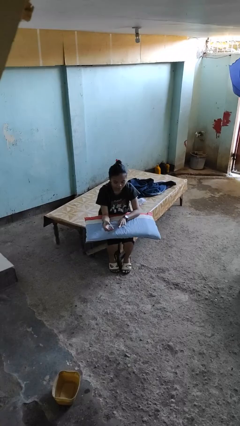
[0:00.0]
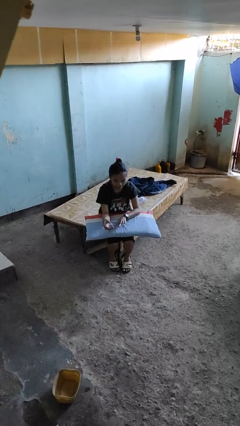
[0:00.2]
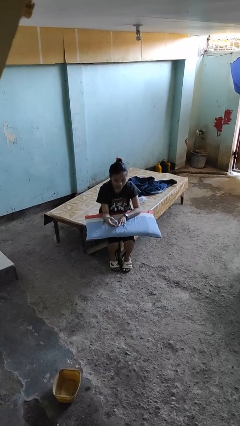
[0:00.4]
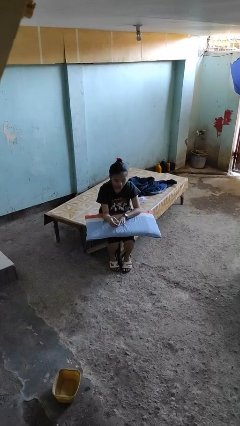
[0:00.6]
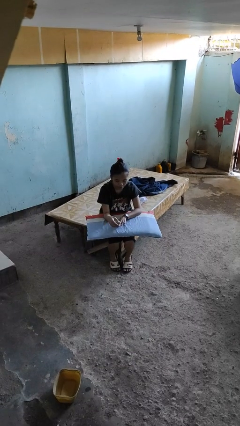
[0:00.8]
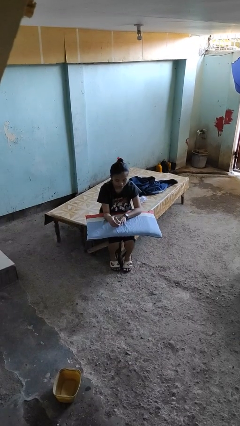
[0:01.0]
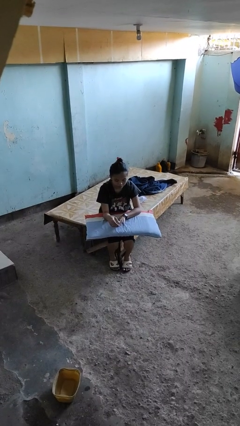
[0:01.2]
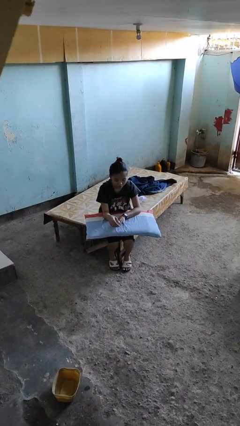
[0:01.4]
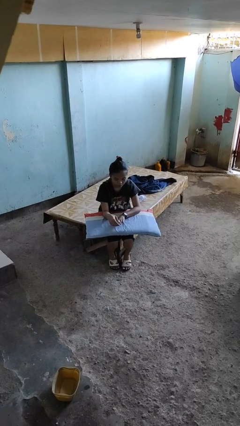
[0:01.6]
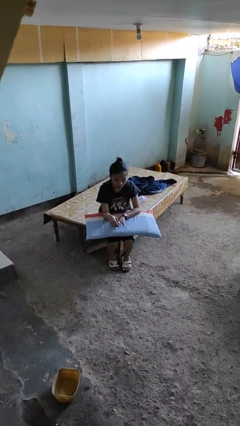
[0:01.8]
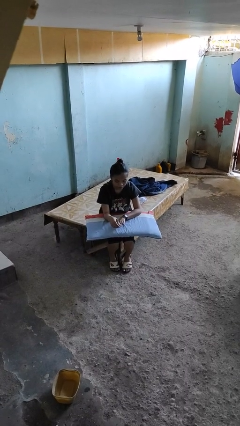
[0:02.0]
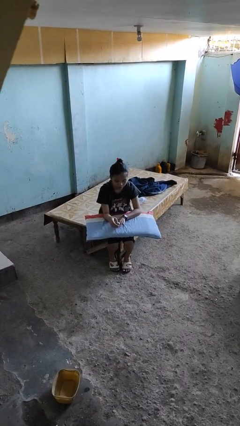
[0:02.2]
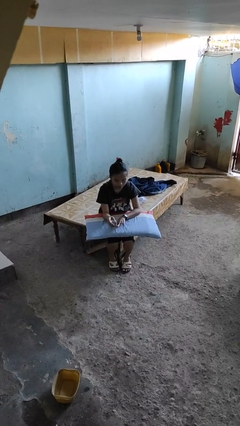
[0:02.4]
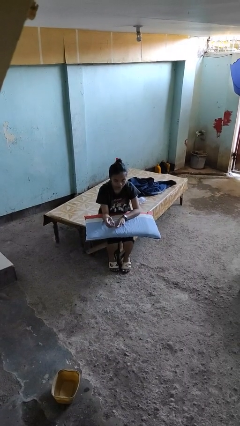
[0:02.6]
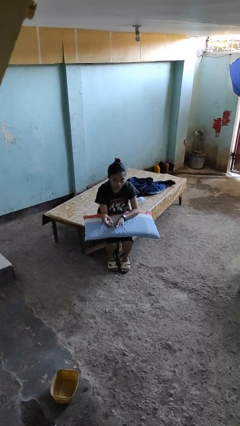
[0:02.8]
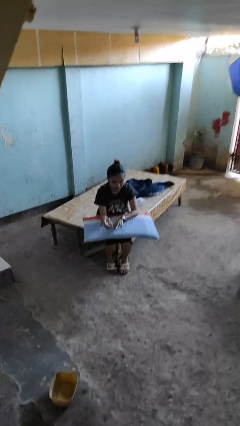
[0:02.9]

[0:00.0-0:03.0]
person clips fingernails

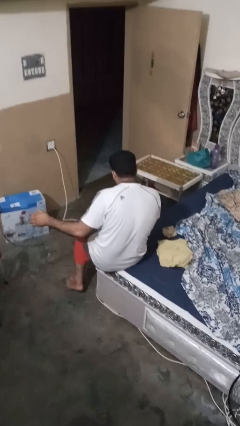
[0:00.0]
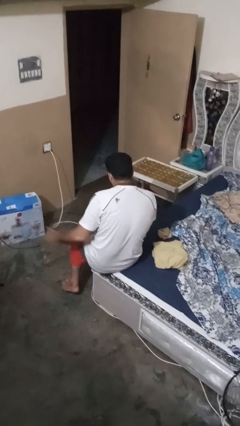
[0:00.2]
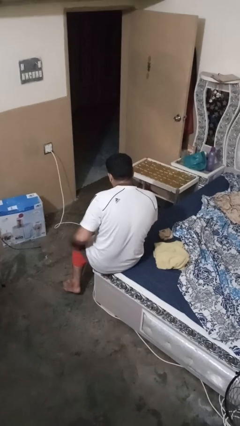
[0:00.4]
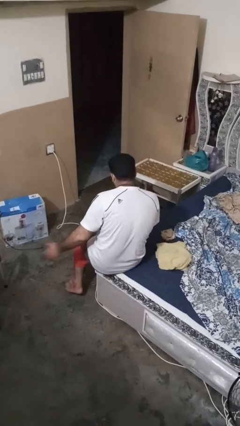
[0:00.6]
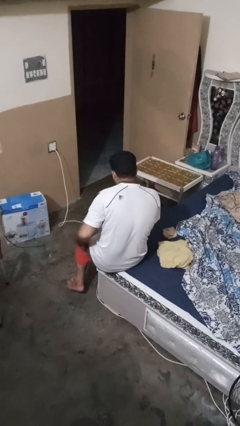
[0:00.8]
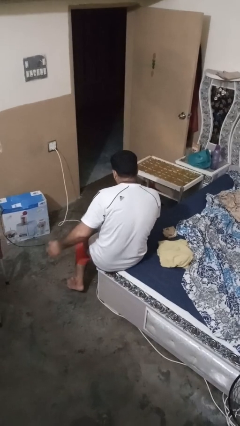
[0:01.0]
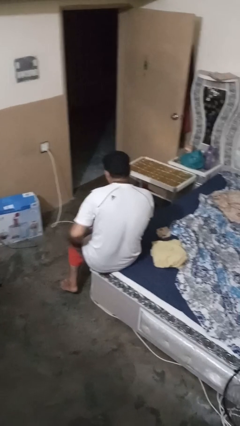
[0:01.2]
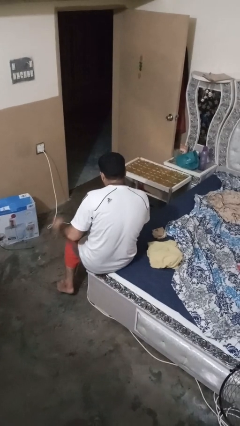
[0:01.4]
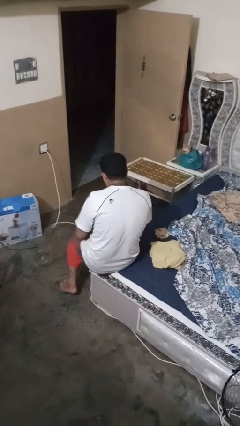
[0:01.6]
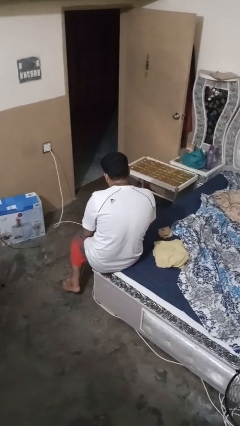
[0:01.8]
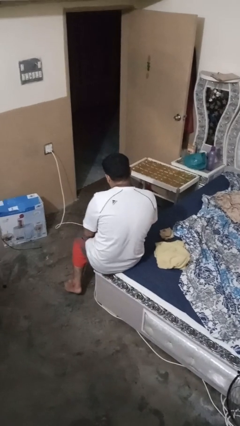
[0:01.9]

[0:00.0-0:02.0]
person slaps hands on thighs

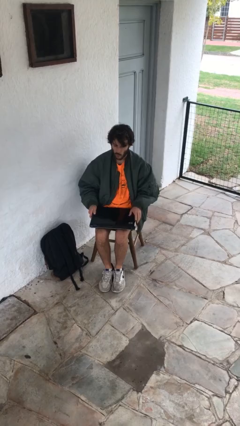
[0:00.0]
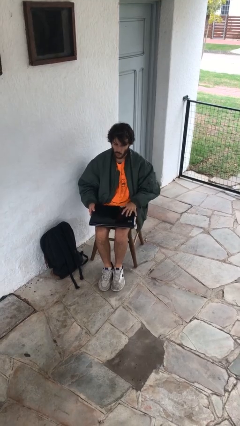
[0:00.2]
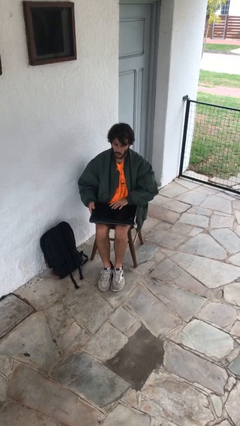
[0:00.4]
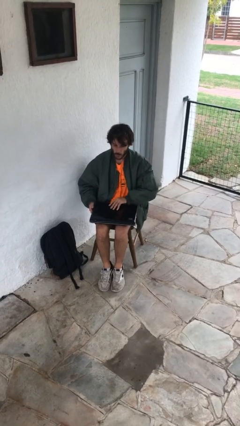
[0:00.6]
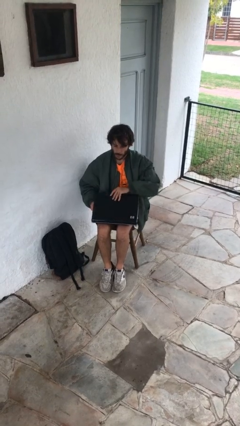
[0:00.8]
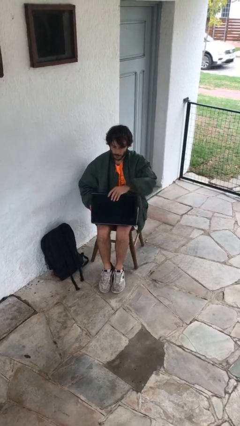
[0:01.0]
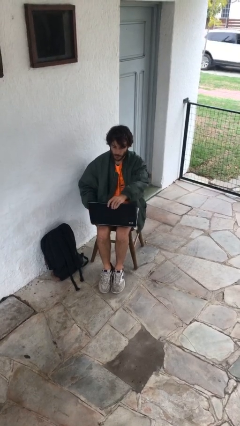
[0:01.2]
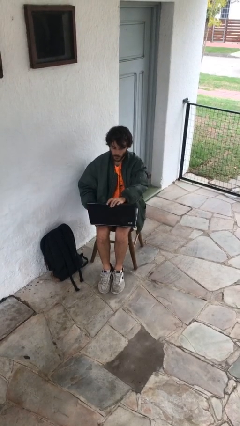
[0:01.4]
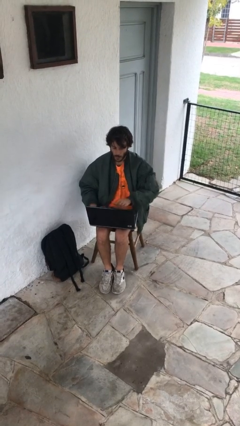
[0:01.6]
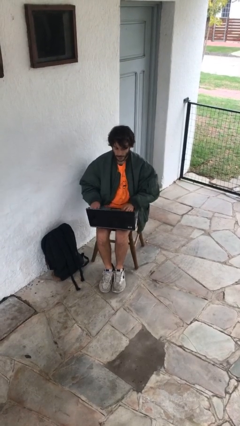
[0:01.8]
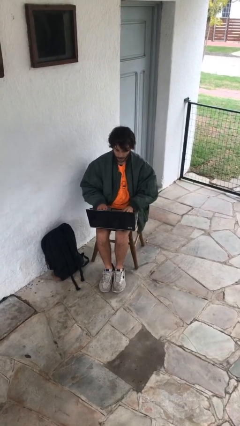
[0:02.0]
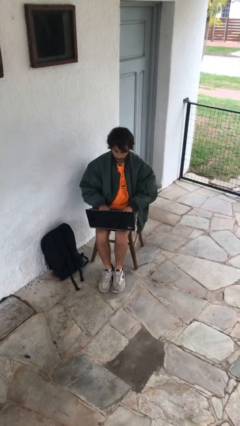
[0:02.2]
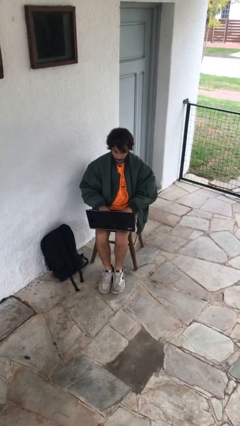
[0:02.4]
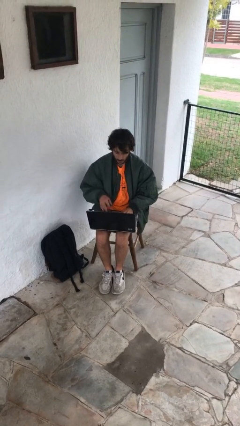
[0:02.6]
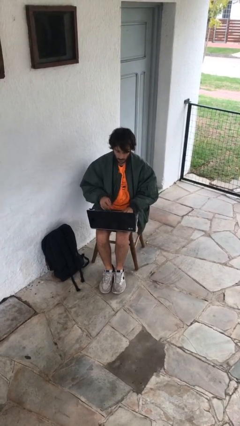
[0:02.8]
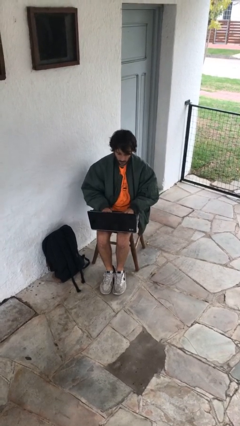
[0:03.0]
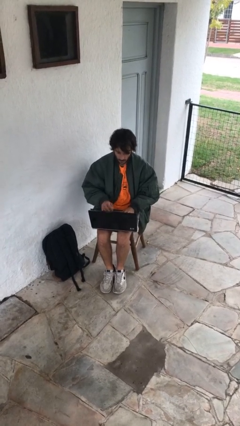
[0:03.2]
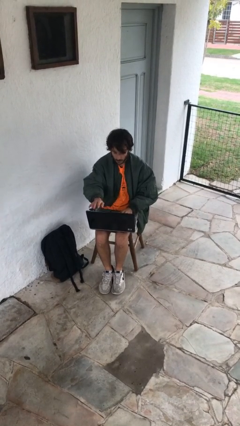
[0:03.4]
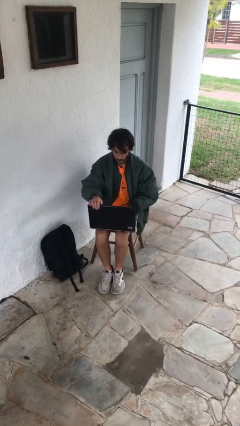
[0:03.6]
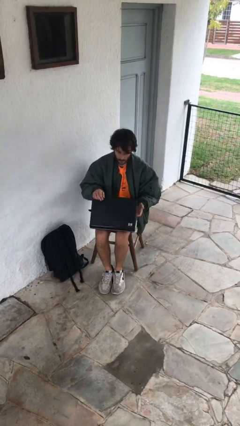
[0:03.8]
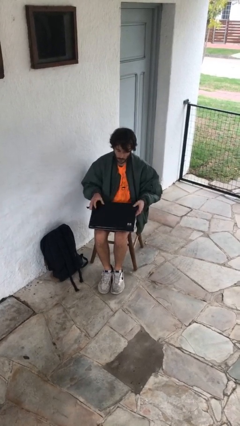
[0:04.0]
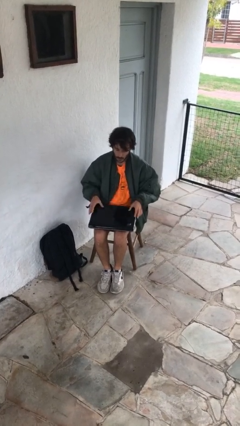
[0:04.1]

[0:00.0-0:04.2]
person interacts with laptop

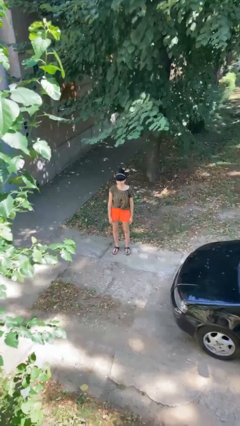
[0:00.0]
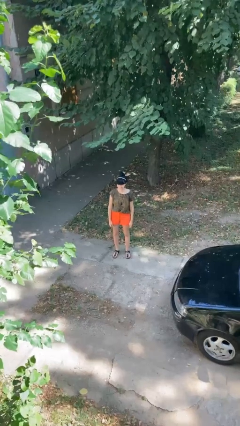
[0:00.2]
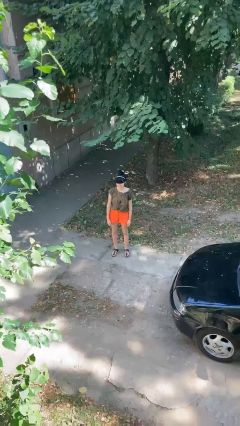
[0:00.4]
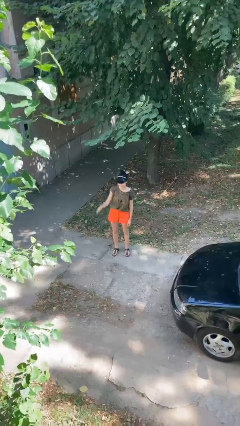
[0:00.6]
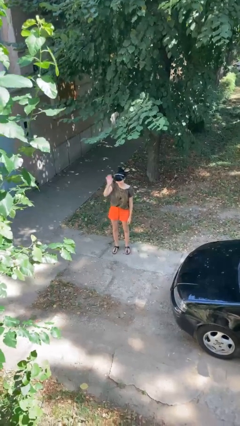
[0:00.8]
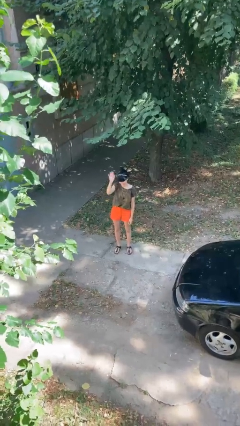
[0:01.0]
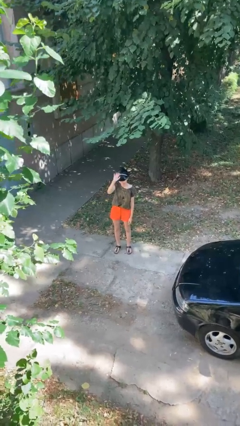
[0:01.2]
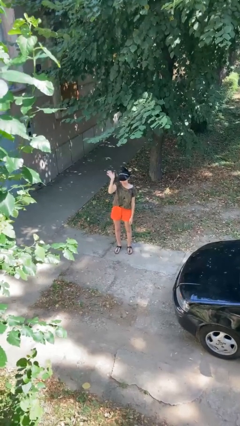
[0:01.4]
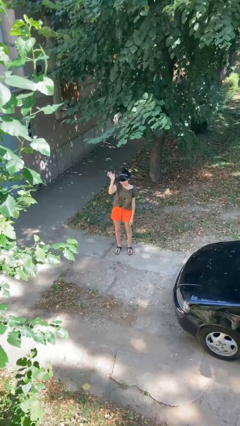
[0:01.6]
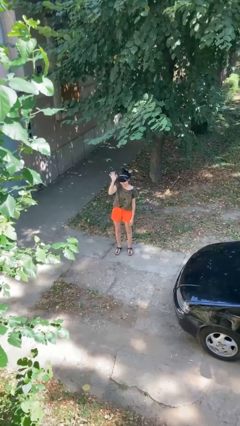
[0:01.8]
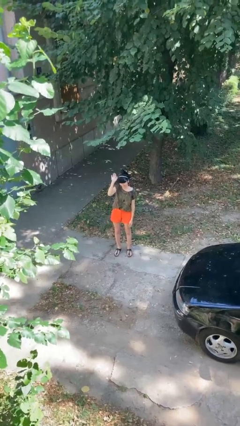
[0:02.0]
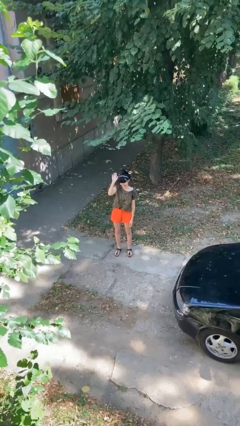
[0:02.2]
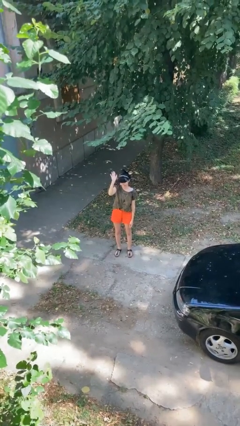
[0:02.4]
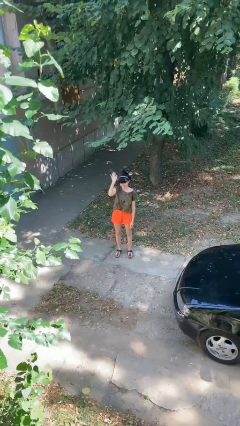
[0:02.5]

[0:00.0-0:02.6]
person waves at person

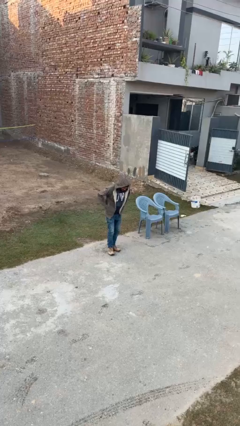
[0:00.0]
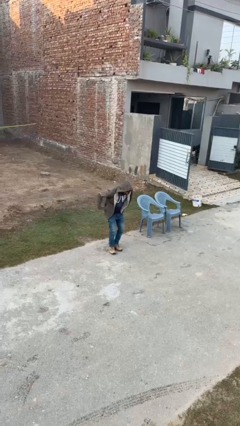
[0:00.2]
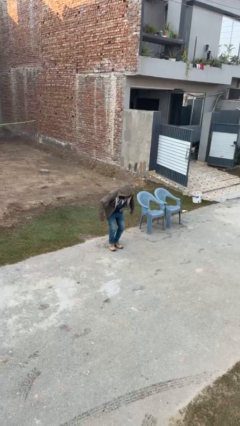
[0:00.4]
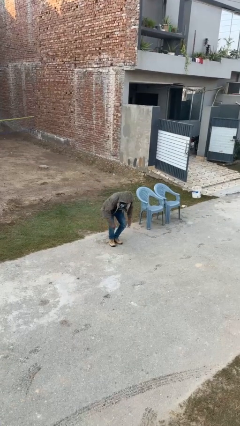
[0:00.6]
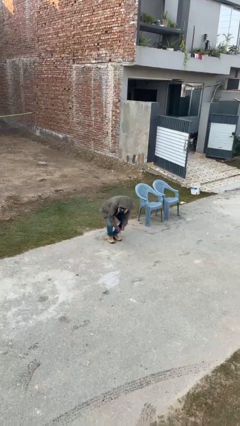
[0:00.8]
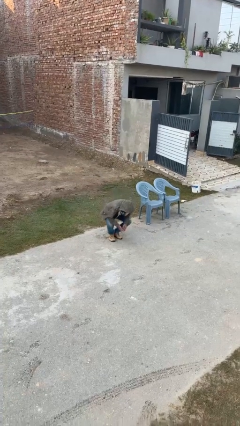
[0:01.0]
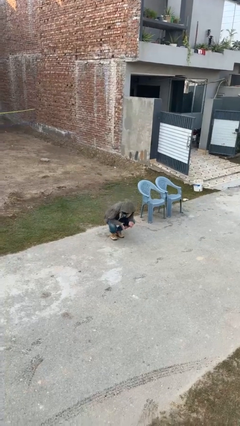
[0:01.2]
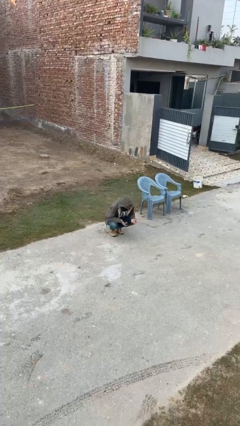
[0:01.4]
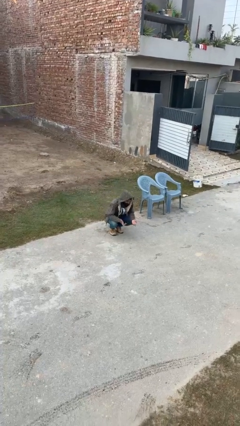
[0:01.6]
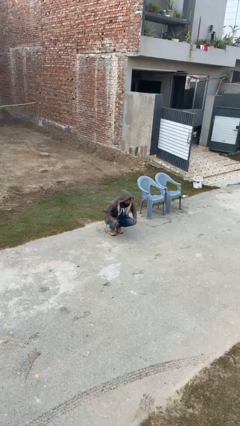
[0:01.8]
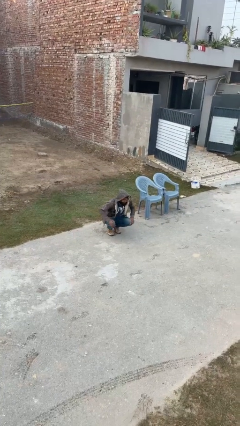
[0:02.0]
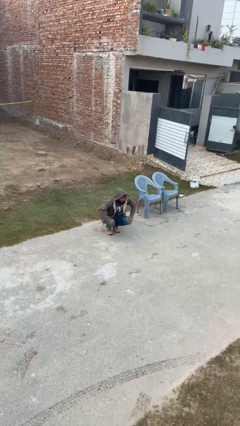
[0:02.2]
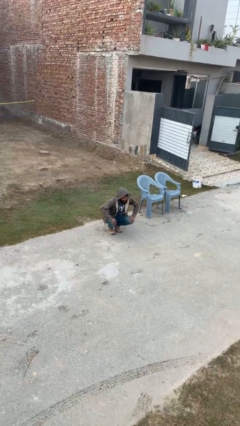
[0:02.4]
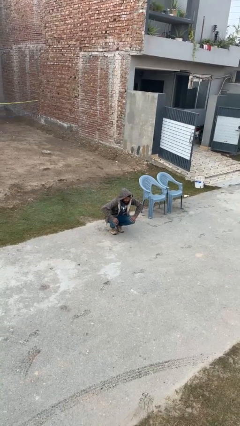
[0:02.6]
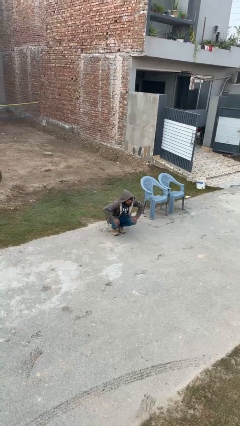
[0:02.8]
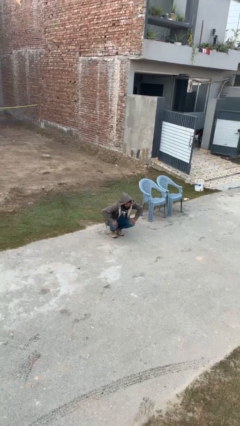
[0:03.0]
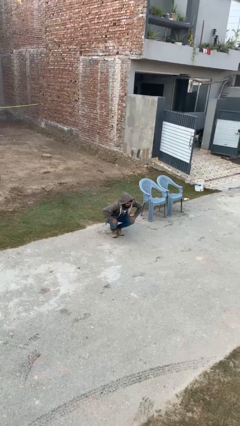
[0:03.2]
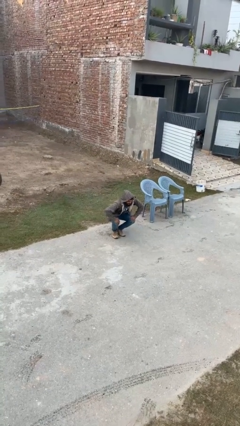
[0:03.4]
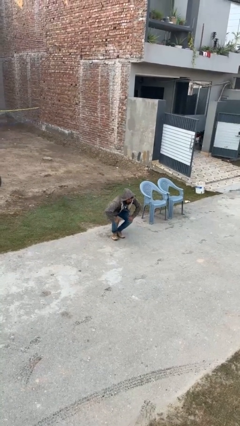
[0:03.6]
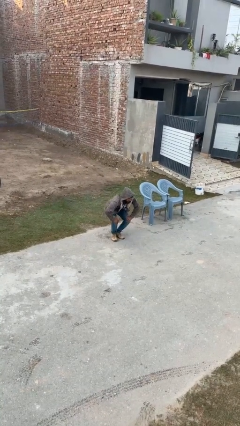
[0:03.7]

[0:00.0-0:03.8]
person sits down

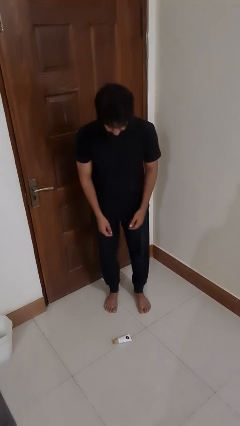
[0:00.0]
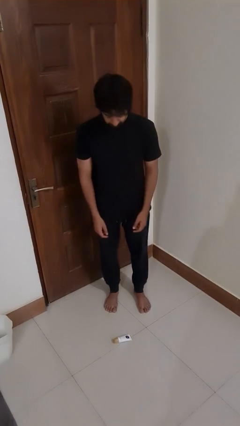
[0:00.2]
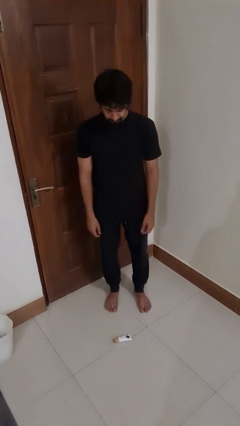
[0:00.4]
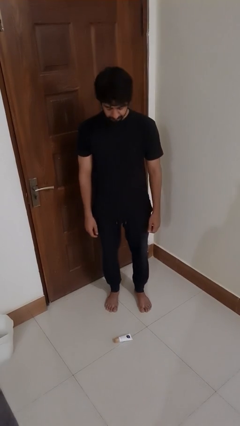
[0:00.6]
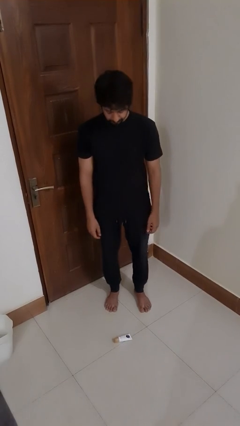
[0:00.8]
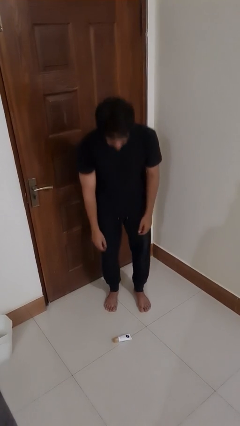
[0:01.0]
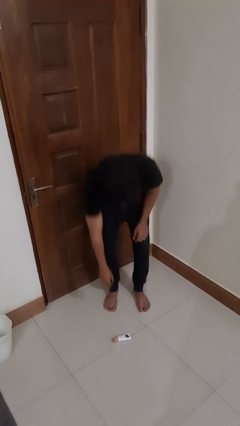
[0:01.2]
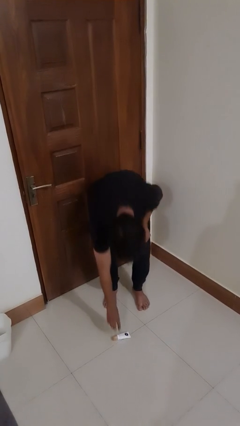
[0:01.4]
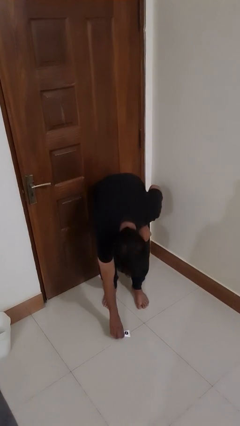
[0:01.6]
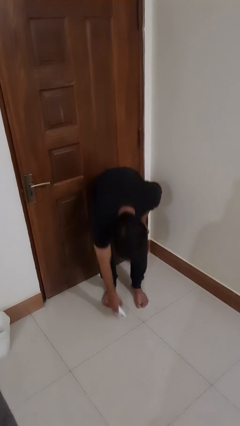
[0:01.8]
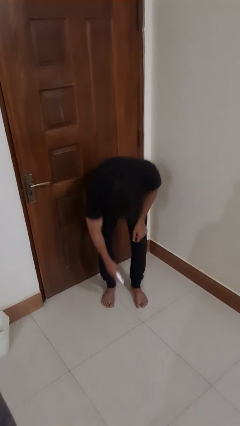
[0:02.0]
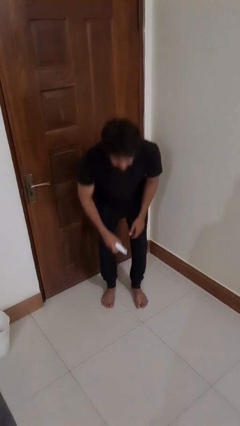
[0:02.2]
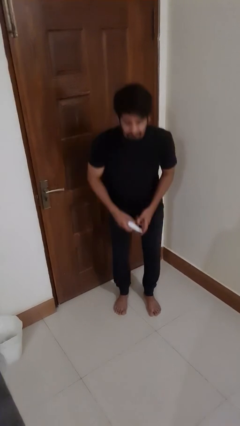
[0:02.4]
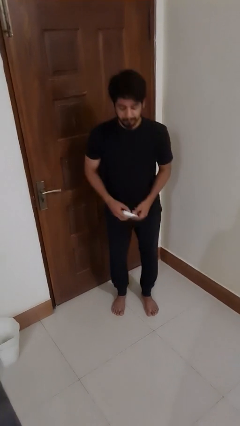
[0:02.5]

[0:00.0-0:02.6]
person picks up object from floor
